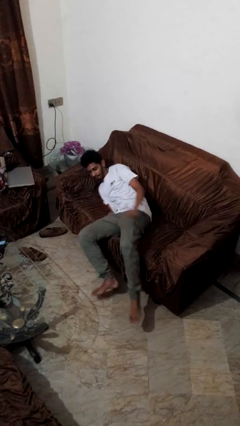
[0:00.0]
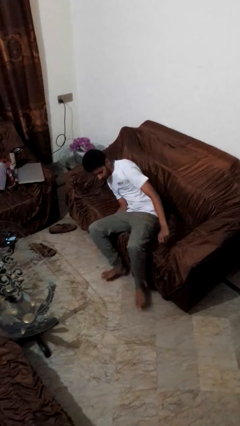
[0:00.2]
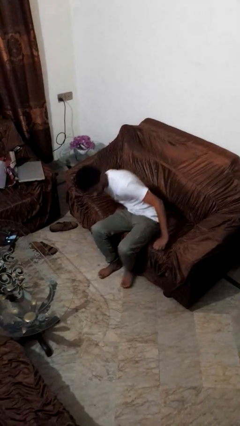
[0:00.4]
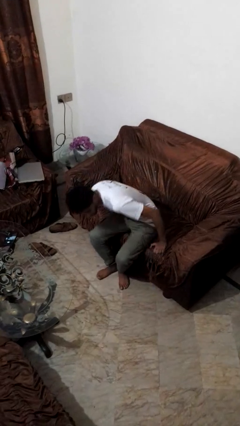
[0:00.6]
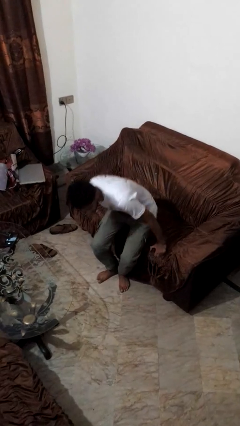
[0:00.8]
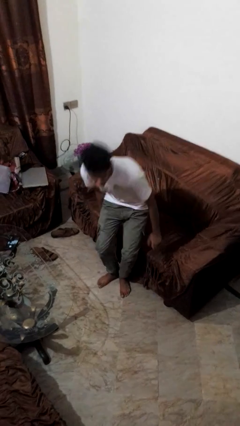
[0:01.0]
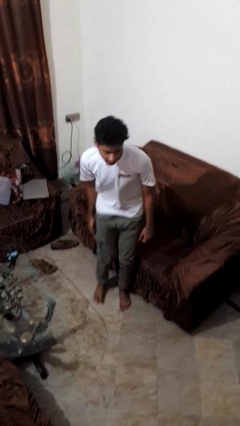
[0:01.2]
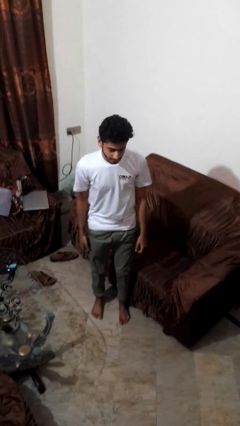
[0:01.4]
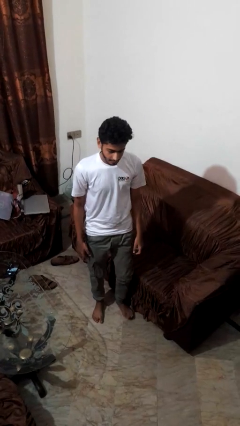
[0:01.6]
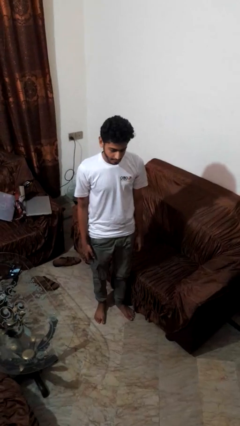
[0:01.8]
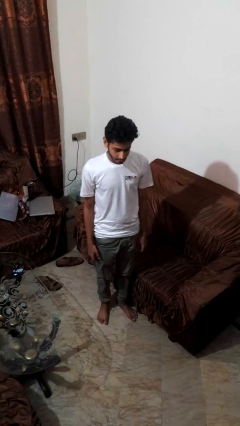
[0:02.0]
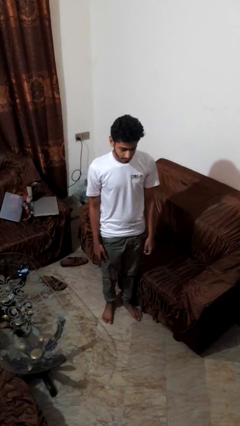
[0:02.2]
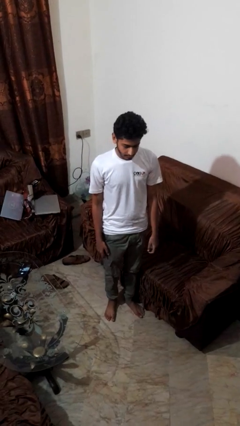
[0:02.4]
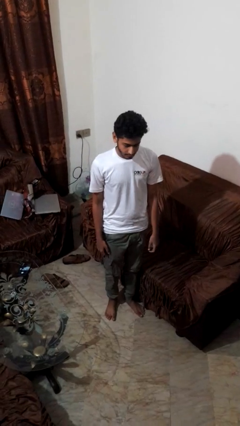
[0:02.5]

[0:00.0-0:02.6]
person stands up

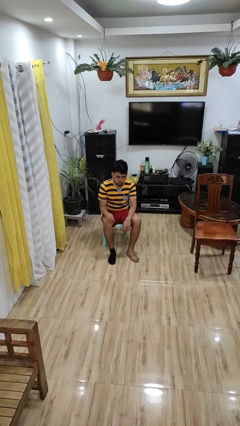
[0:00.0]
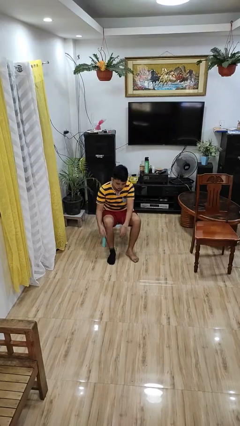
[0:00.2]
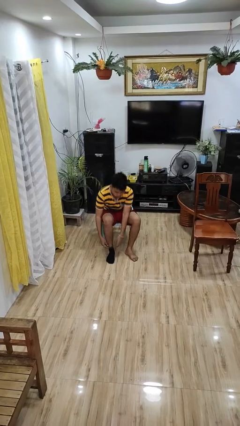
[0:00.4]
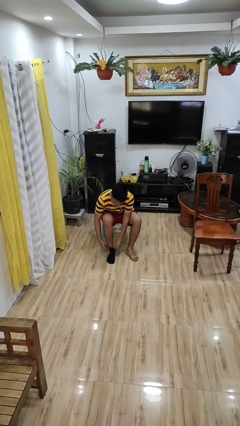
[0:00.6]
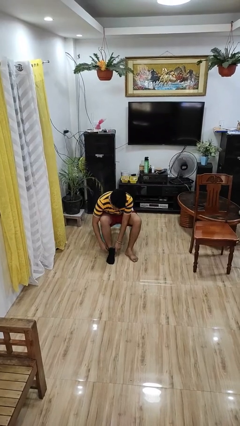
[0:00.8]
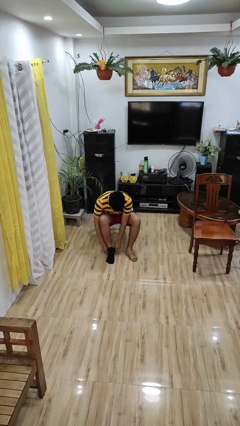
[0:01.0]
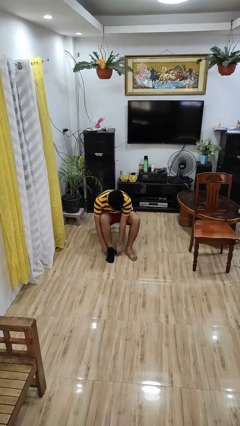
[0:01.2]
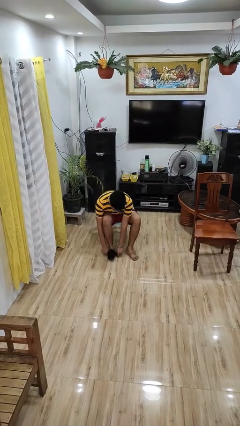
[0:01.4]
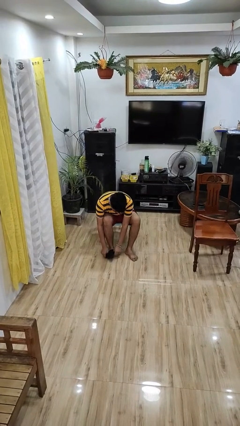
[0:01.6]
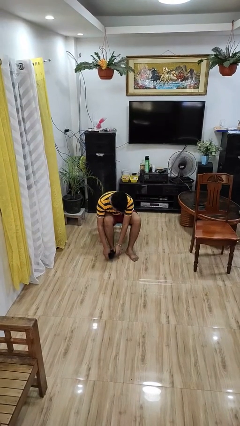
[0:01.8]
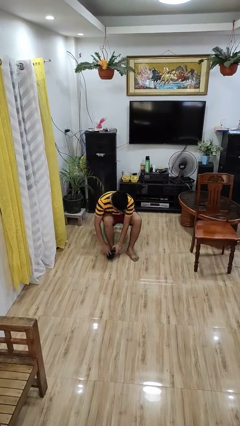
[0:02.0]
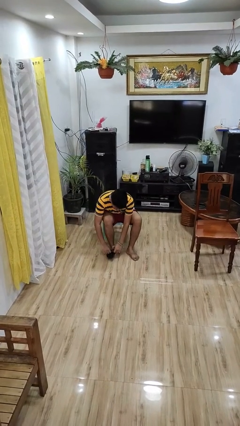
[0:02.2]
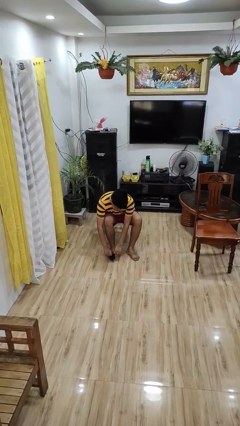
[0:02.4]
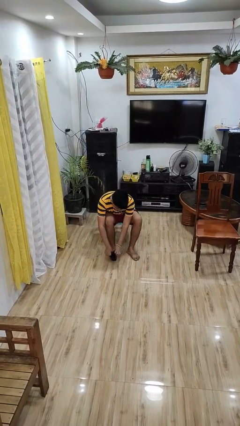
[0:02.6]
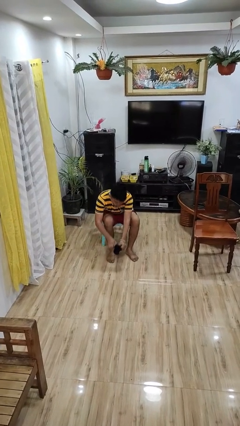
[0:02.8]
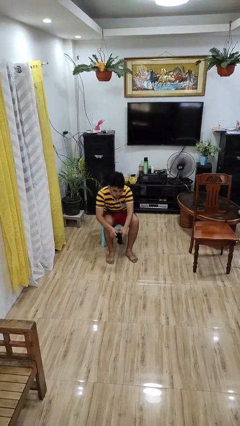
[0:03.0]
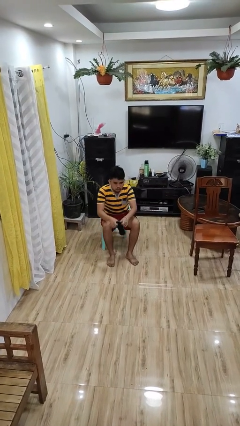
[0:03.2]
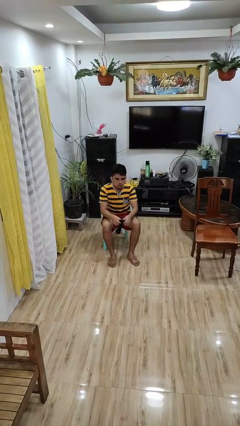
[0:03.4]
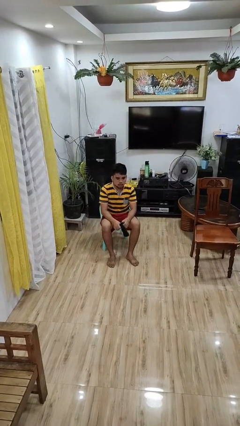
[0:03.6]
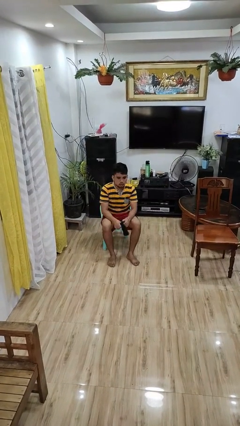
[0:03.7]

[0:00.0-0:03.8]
person takes off socks

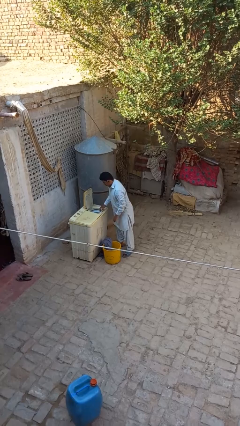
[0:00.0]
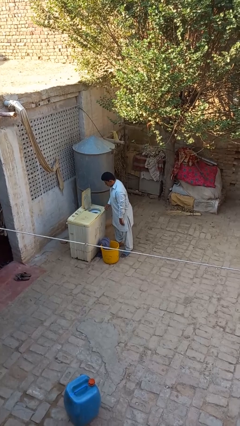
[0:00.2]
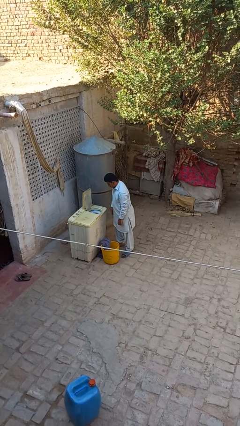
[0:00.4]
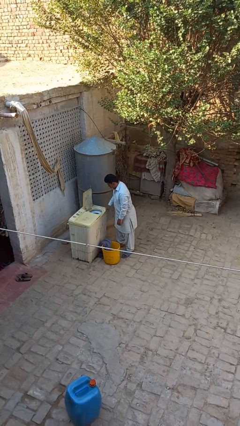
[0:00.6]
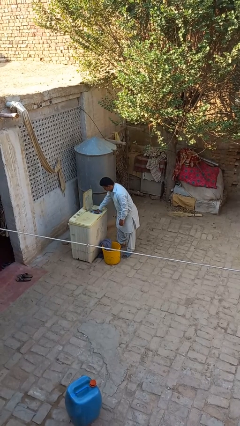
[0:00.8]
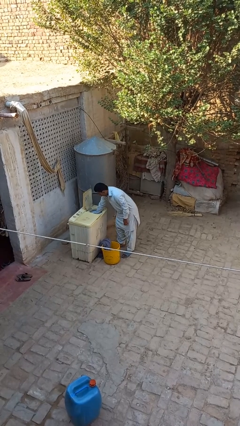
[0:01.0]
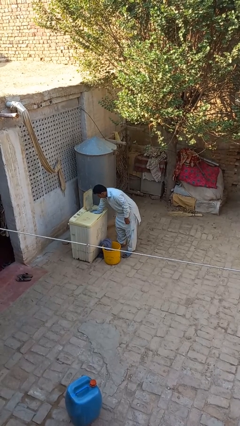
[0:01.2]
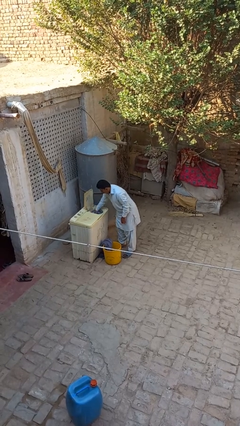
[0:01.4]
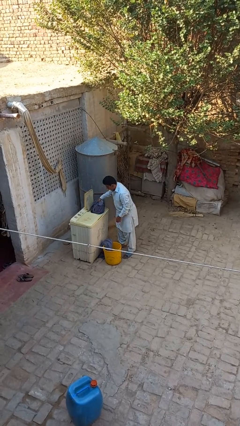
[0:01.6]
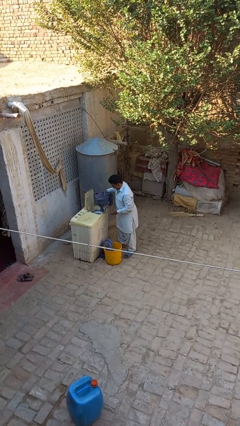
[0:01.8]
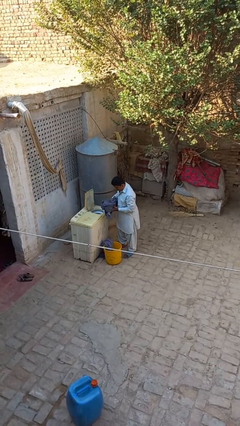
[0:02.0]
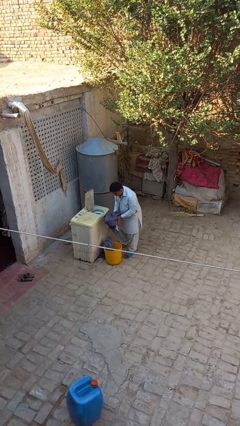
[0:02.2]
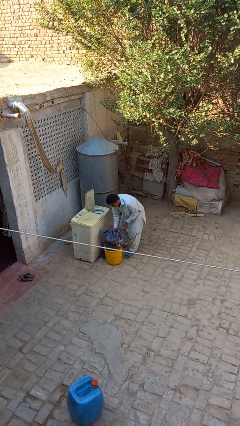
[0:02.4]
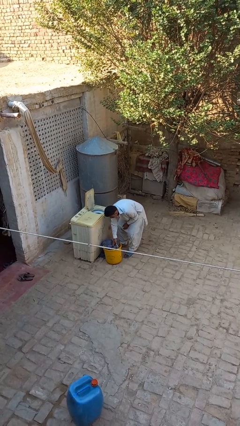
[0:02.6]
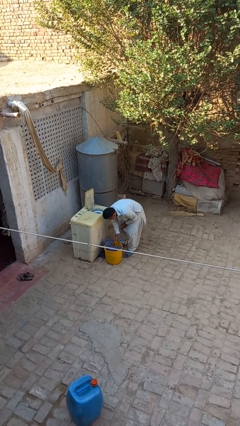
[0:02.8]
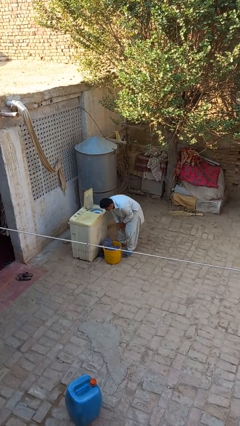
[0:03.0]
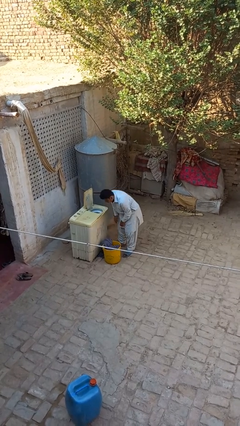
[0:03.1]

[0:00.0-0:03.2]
person unloads dryer

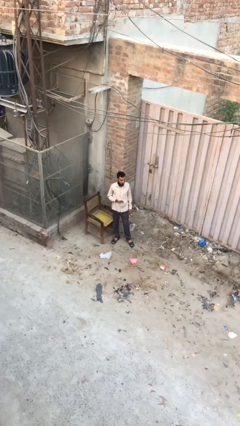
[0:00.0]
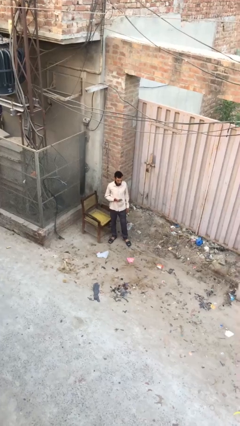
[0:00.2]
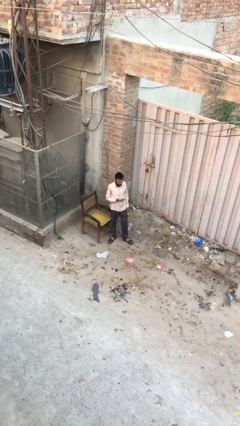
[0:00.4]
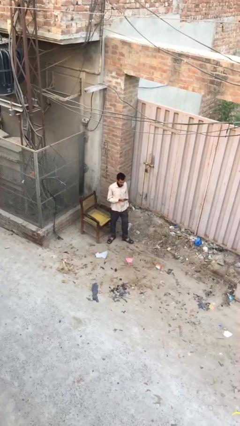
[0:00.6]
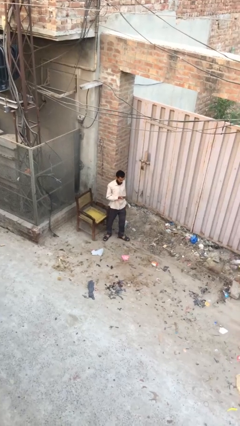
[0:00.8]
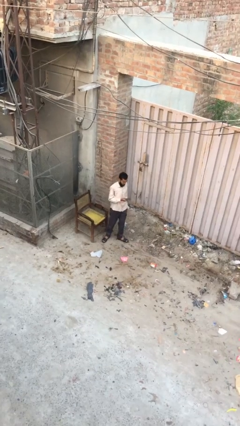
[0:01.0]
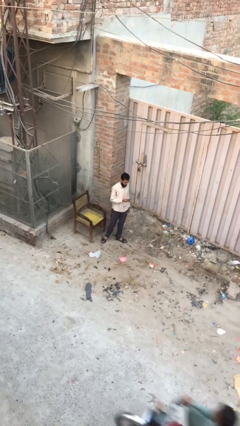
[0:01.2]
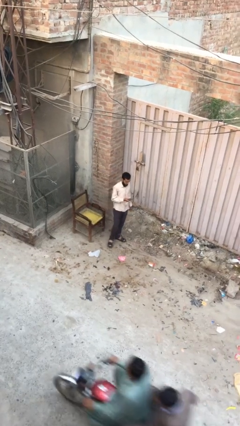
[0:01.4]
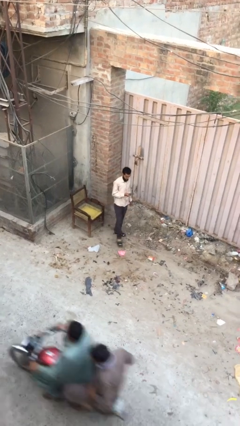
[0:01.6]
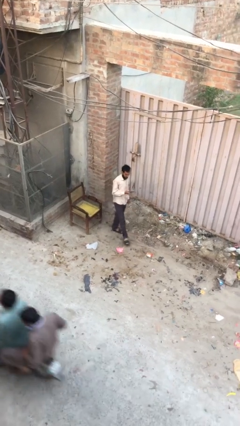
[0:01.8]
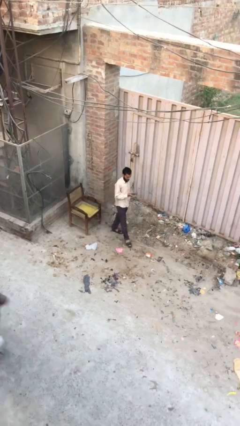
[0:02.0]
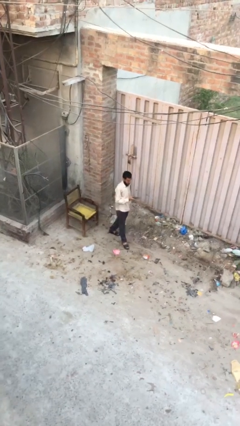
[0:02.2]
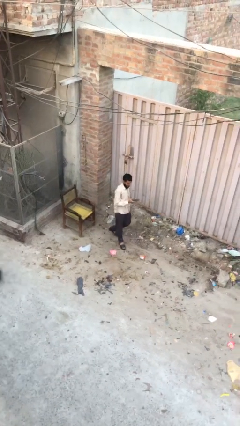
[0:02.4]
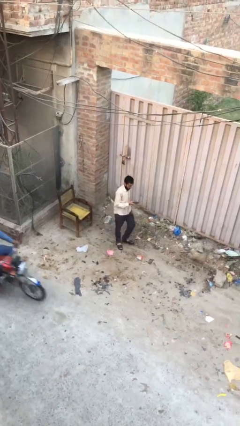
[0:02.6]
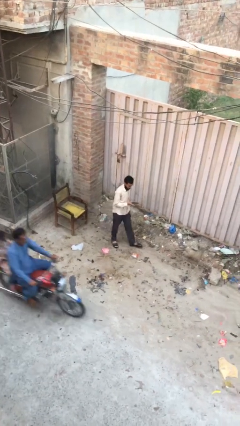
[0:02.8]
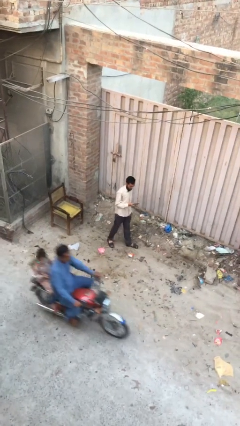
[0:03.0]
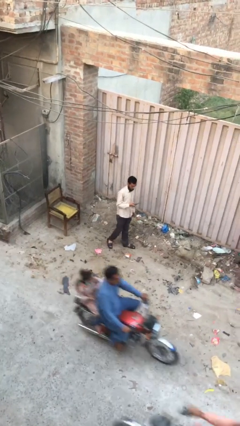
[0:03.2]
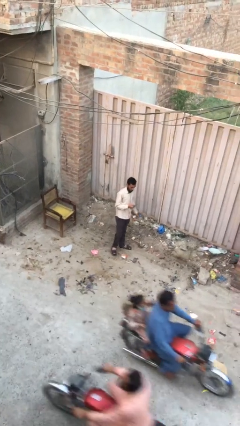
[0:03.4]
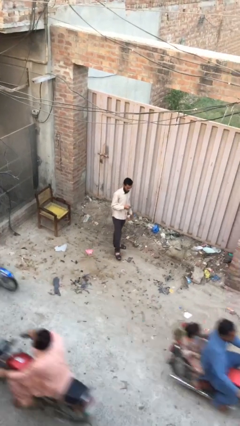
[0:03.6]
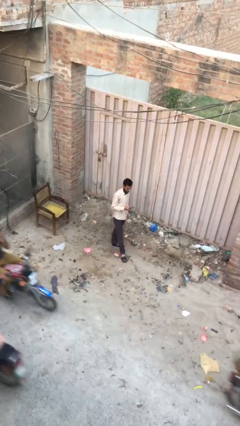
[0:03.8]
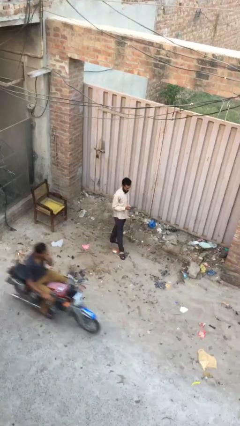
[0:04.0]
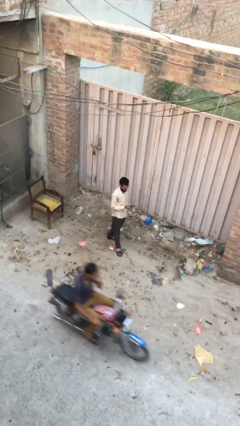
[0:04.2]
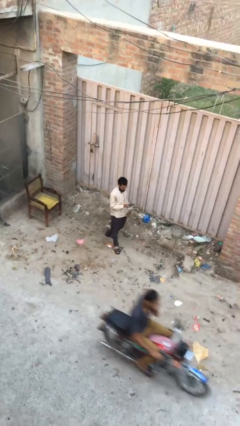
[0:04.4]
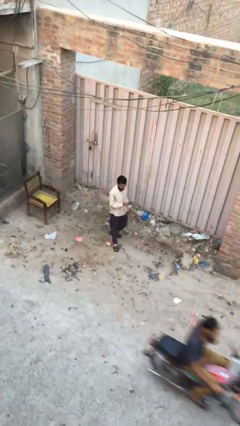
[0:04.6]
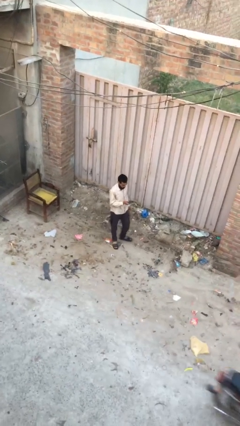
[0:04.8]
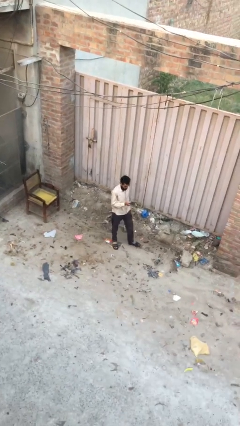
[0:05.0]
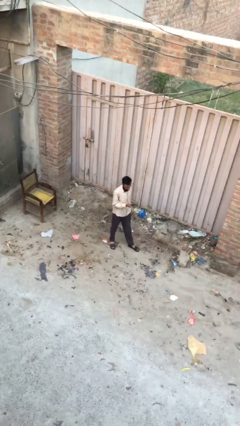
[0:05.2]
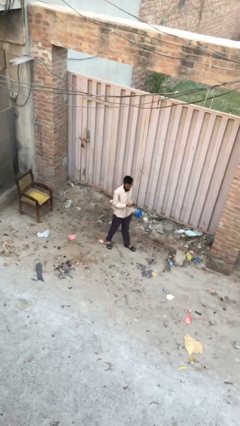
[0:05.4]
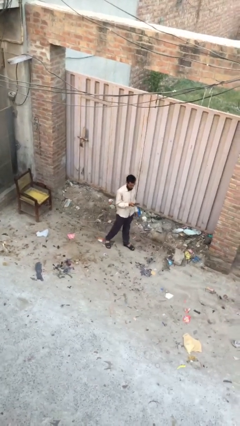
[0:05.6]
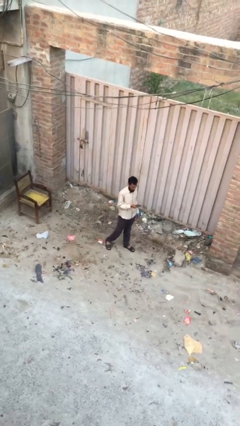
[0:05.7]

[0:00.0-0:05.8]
person texts on phone

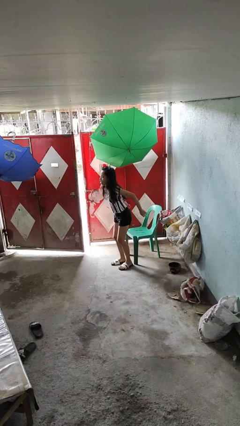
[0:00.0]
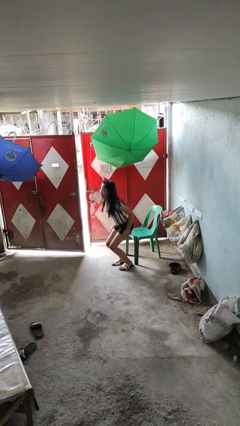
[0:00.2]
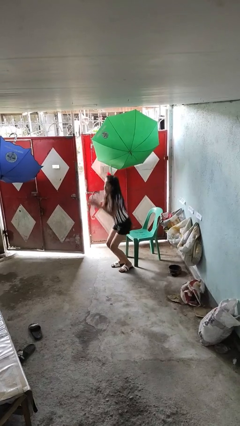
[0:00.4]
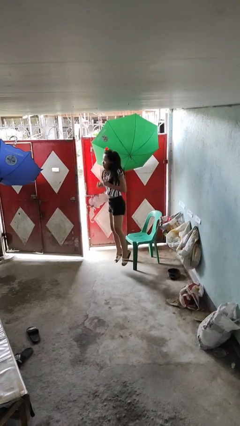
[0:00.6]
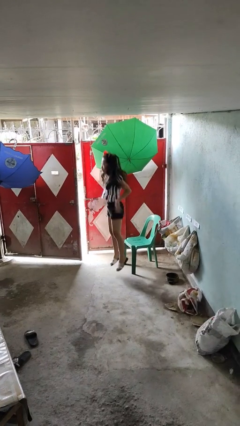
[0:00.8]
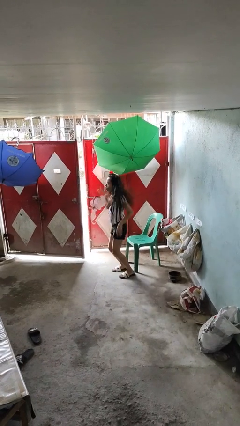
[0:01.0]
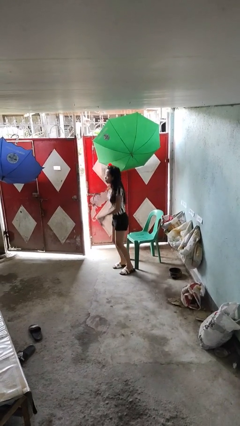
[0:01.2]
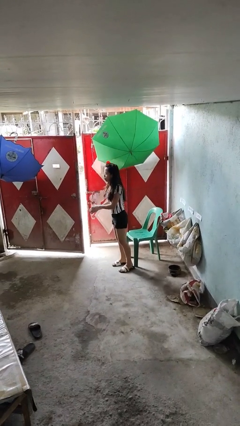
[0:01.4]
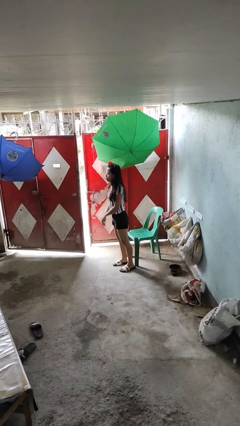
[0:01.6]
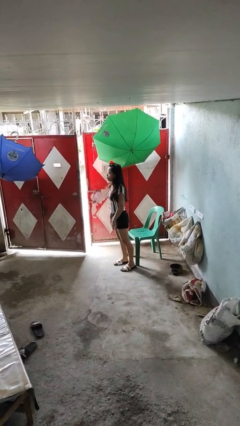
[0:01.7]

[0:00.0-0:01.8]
person jumps

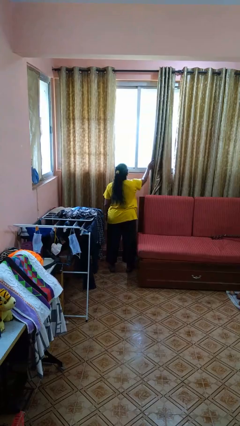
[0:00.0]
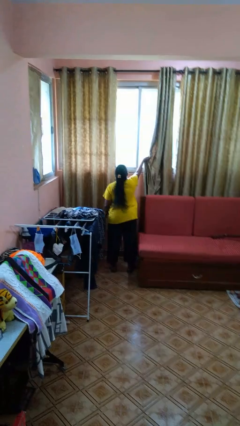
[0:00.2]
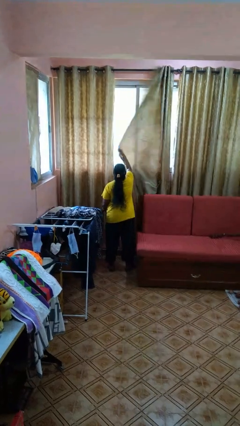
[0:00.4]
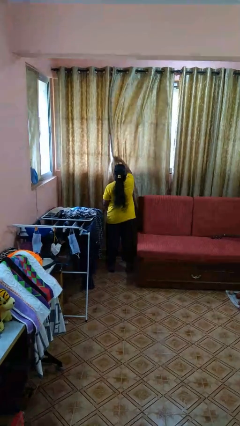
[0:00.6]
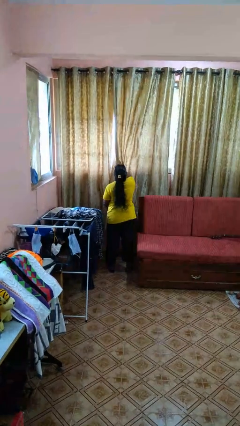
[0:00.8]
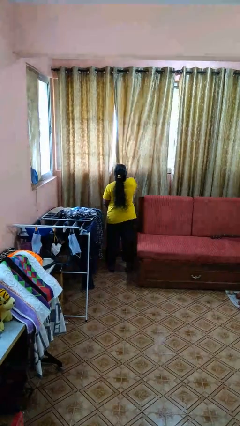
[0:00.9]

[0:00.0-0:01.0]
person closes curtains
